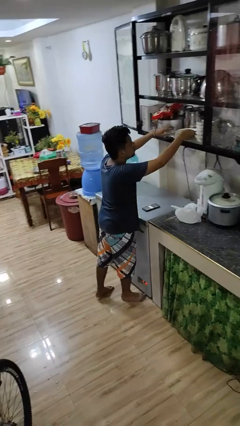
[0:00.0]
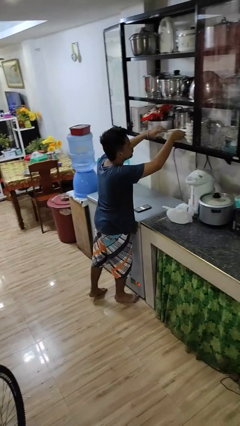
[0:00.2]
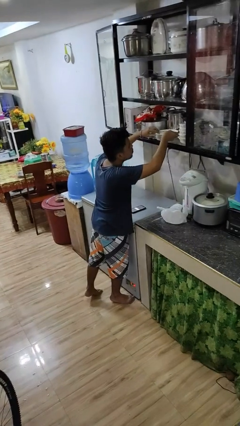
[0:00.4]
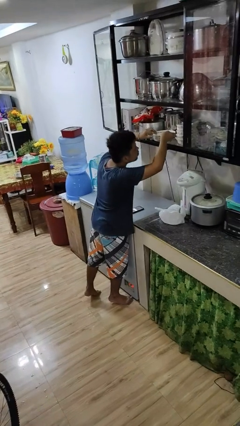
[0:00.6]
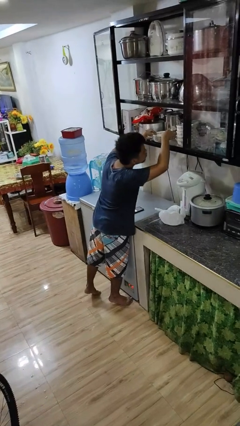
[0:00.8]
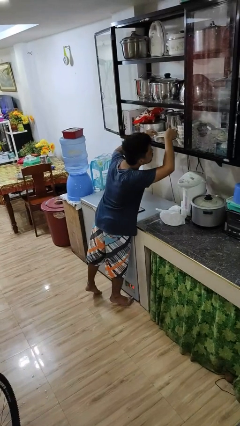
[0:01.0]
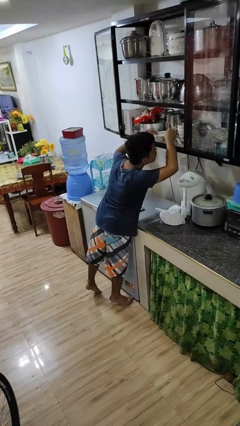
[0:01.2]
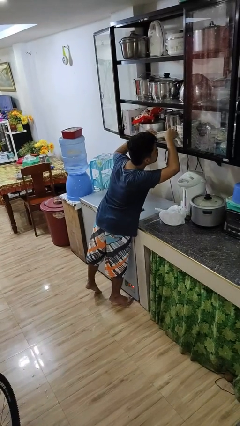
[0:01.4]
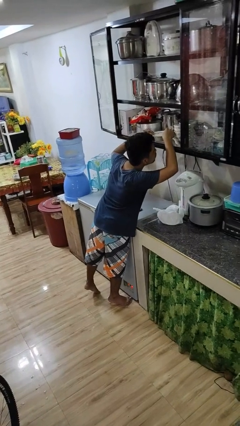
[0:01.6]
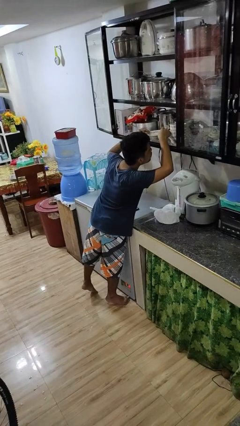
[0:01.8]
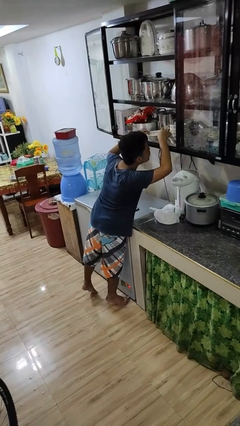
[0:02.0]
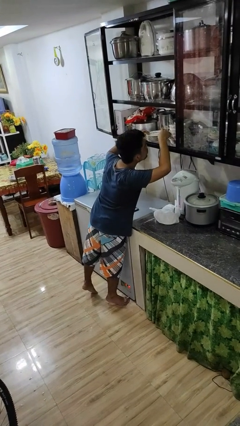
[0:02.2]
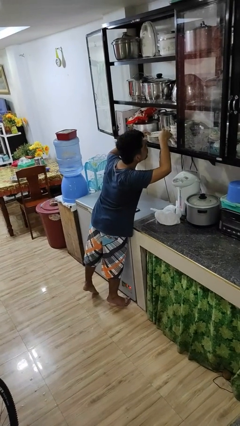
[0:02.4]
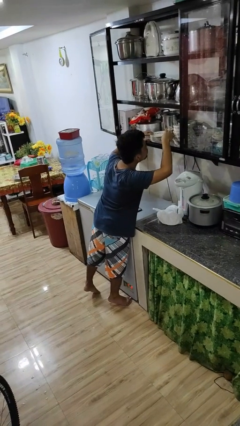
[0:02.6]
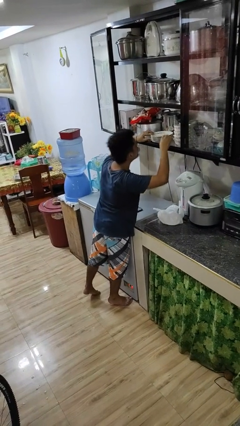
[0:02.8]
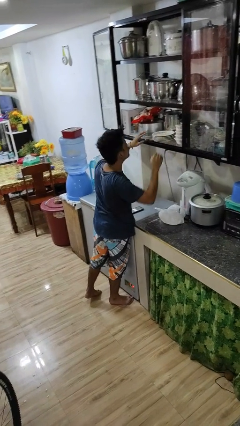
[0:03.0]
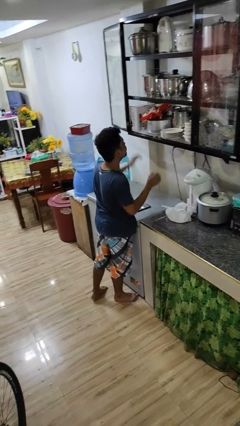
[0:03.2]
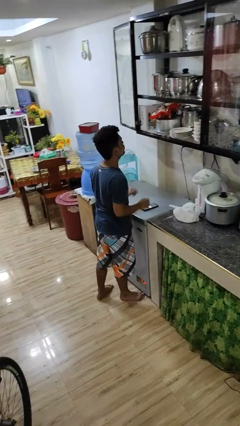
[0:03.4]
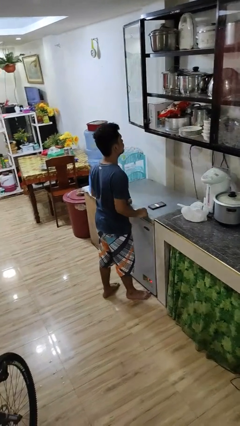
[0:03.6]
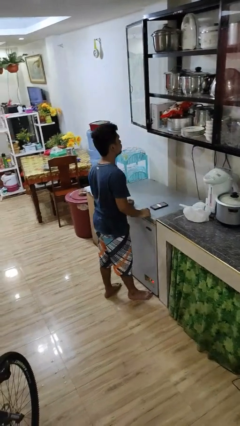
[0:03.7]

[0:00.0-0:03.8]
person searches in cabinet

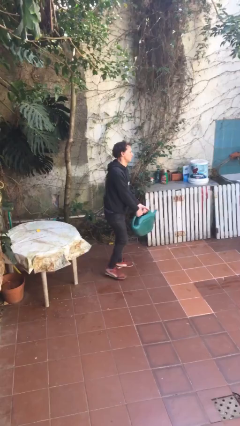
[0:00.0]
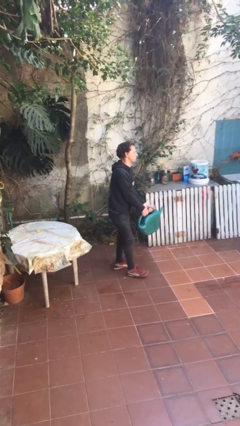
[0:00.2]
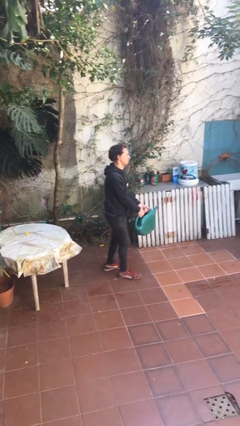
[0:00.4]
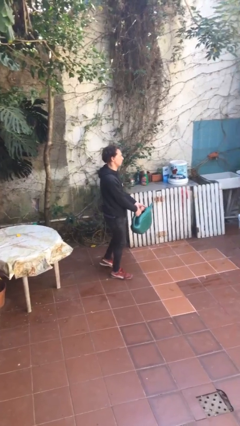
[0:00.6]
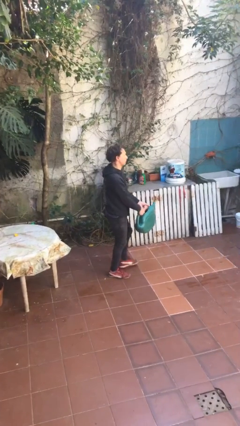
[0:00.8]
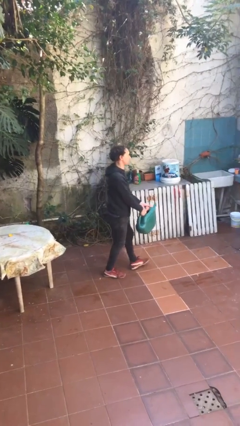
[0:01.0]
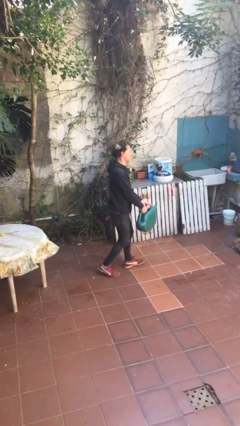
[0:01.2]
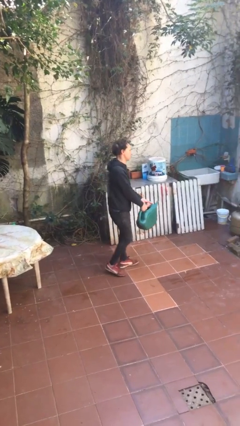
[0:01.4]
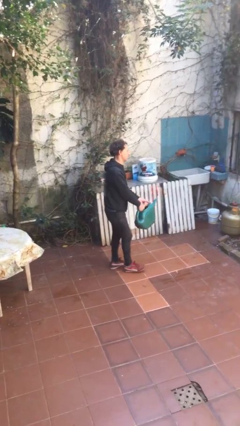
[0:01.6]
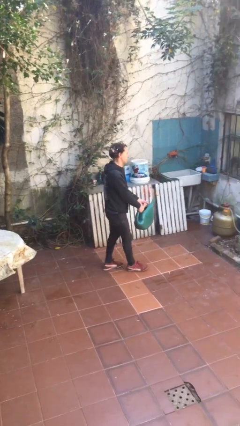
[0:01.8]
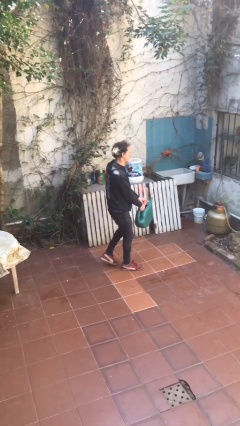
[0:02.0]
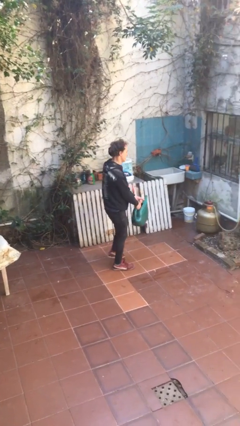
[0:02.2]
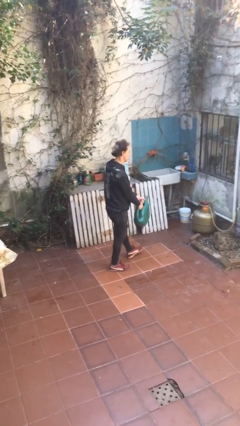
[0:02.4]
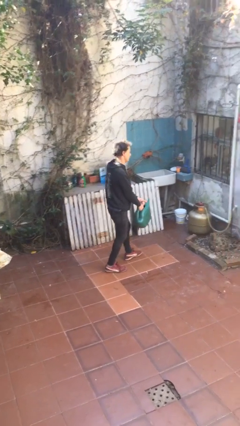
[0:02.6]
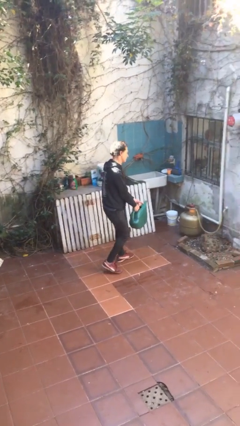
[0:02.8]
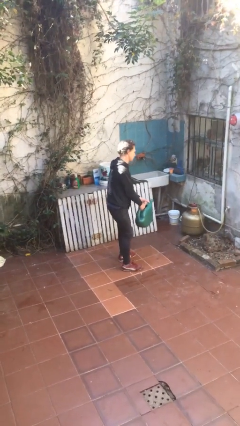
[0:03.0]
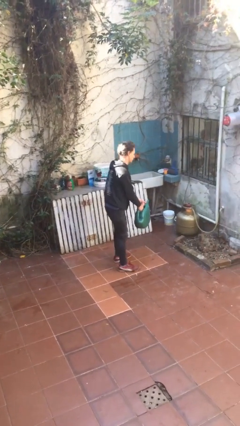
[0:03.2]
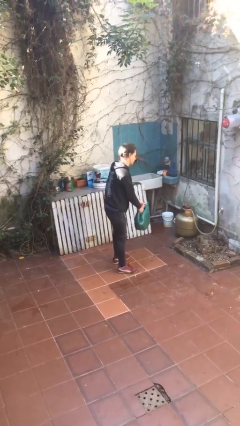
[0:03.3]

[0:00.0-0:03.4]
person carries heavy object

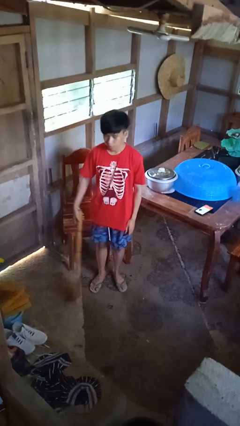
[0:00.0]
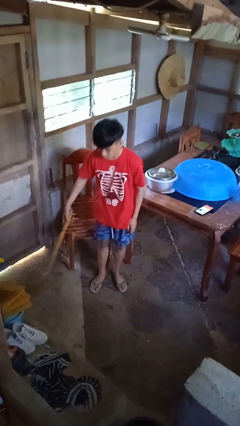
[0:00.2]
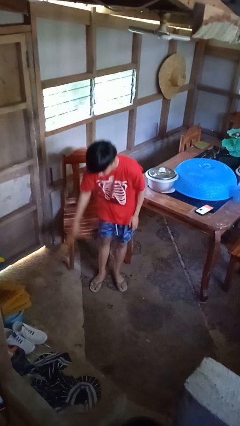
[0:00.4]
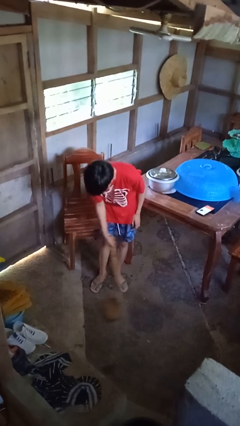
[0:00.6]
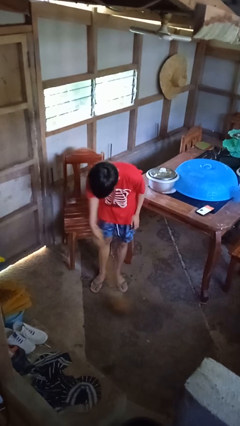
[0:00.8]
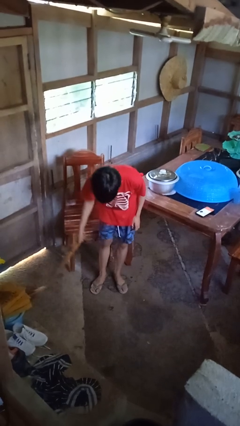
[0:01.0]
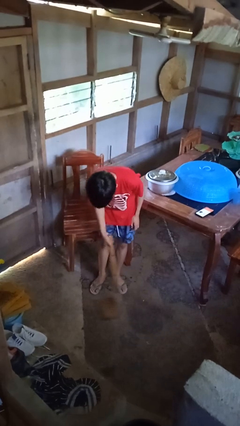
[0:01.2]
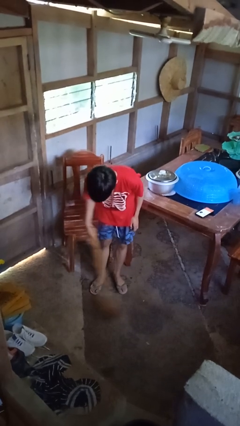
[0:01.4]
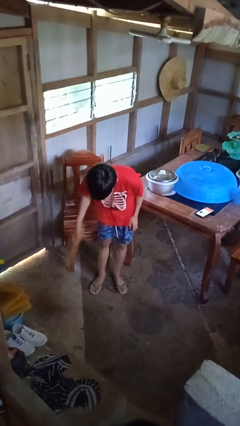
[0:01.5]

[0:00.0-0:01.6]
person sweeps floor

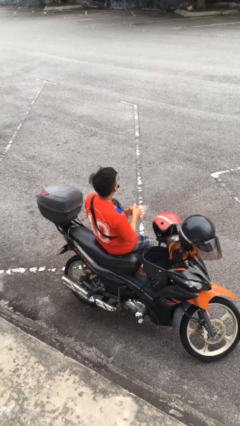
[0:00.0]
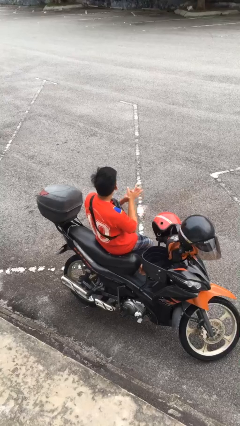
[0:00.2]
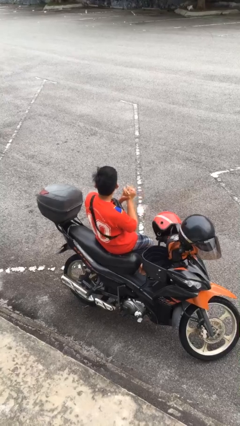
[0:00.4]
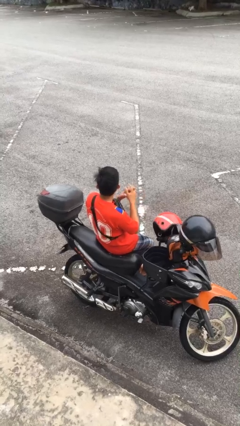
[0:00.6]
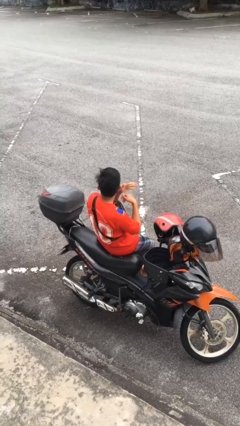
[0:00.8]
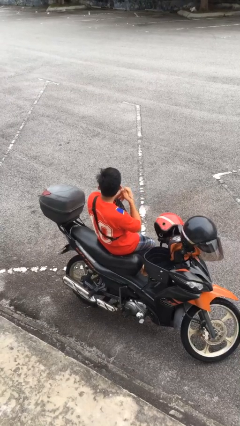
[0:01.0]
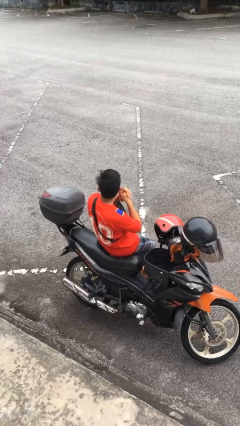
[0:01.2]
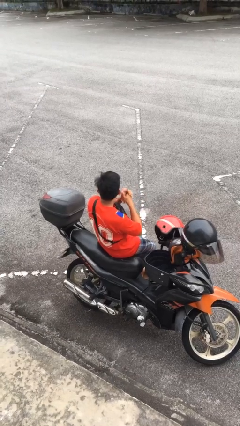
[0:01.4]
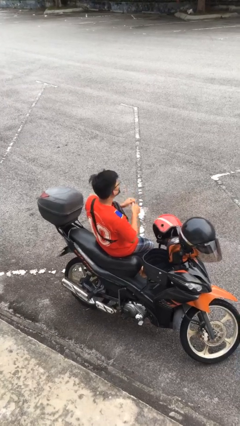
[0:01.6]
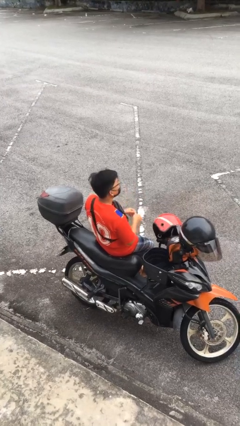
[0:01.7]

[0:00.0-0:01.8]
person cracks knuckles

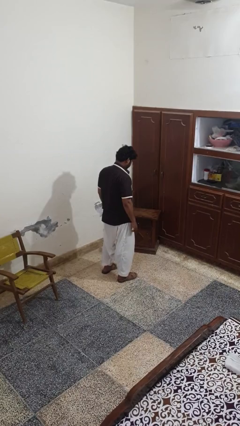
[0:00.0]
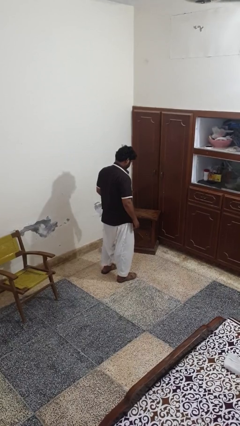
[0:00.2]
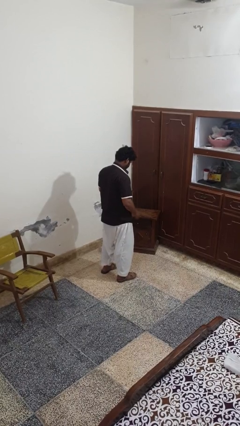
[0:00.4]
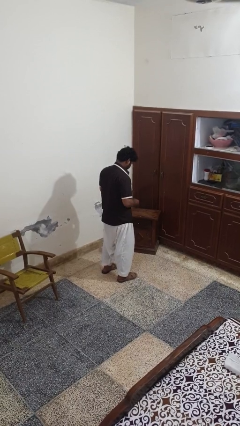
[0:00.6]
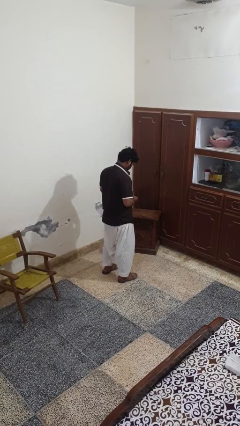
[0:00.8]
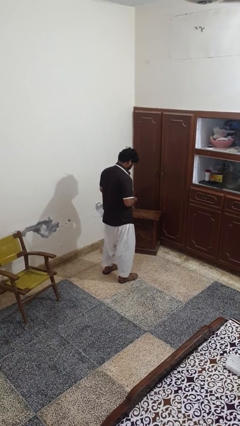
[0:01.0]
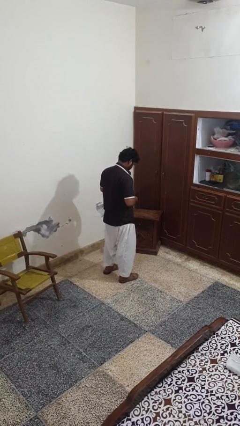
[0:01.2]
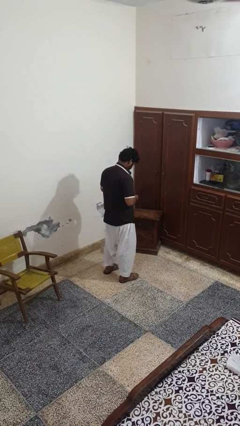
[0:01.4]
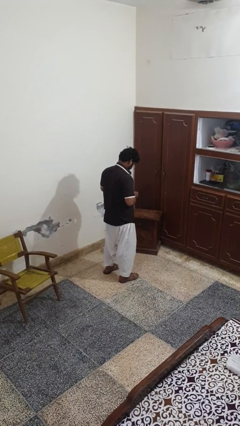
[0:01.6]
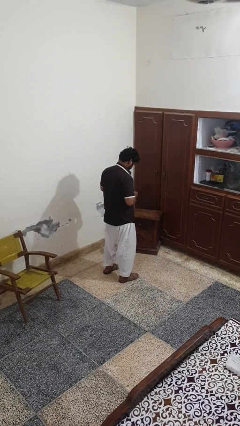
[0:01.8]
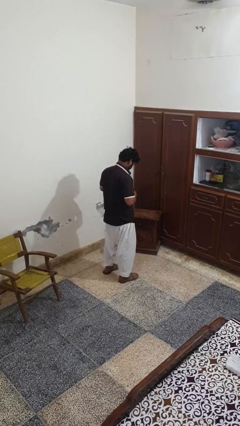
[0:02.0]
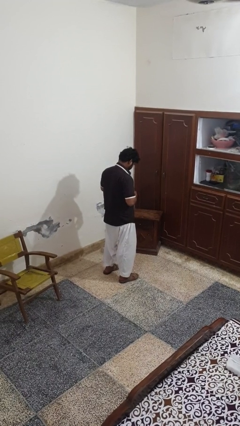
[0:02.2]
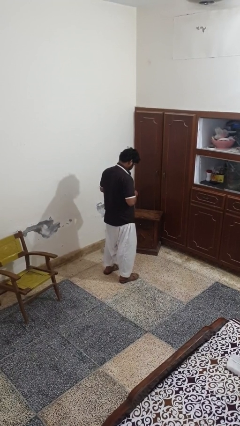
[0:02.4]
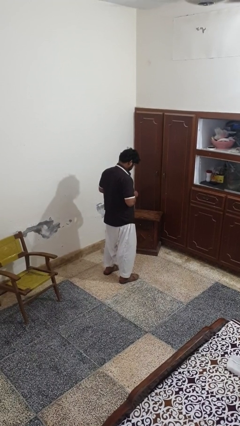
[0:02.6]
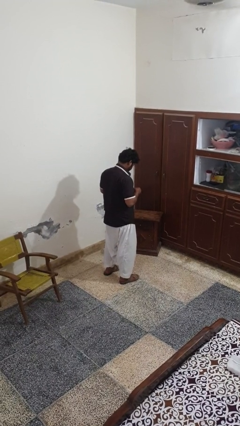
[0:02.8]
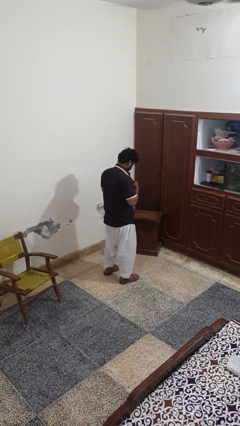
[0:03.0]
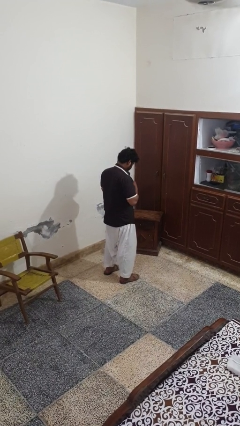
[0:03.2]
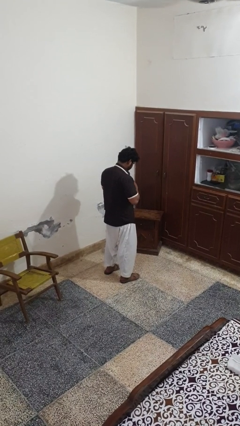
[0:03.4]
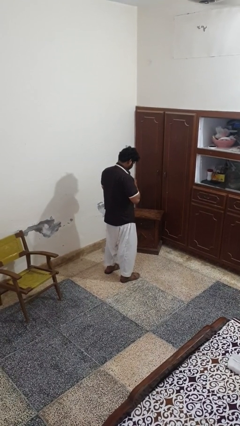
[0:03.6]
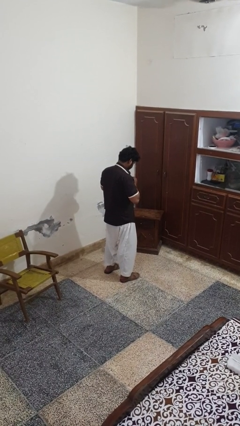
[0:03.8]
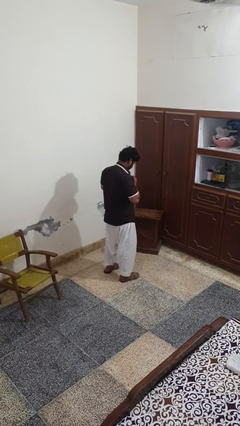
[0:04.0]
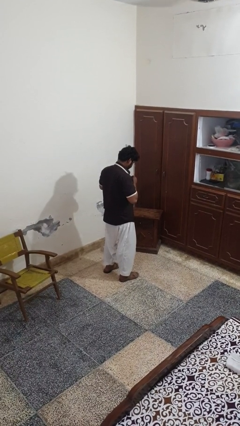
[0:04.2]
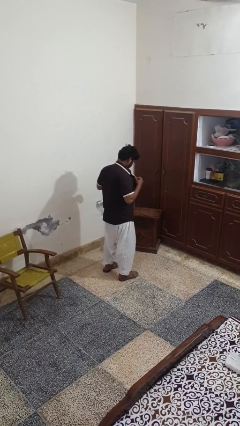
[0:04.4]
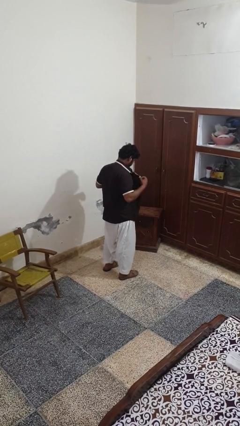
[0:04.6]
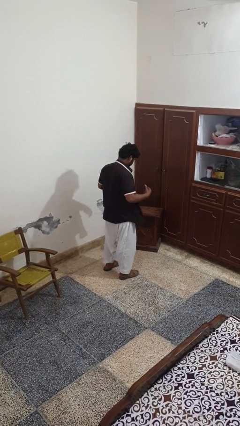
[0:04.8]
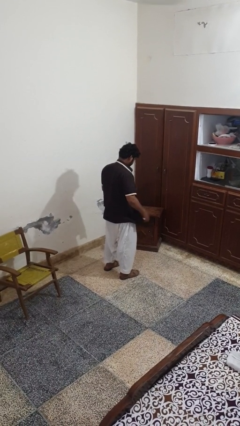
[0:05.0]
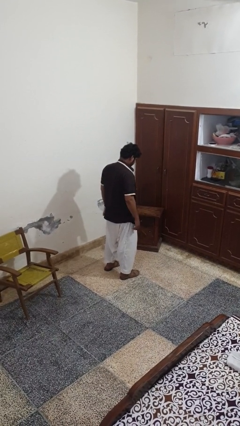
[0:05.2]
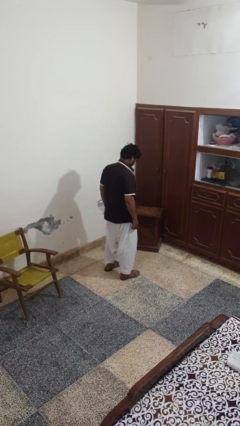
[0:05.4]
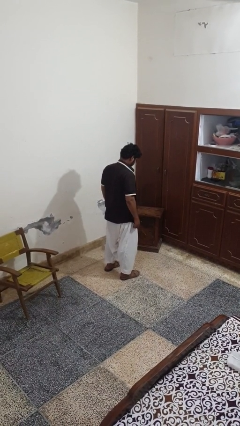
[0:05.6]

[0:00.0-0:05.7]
person unbuttons shirt

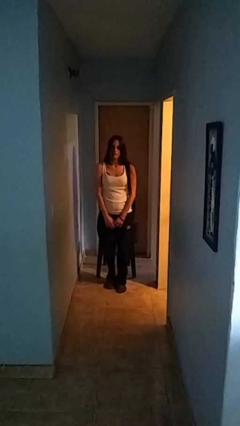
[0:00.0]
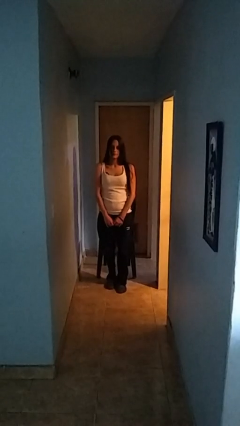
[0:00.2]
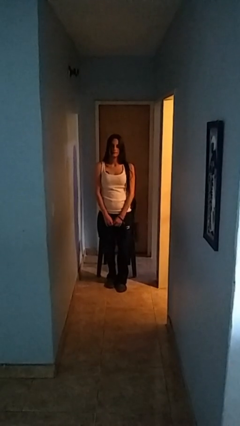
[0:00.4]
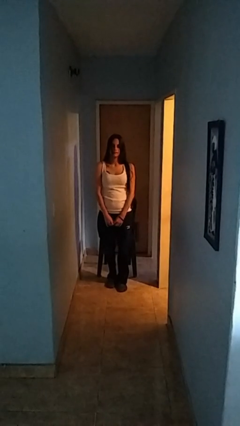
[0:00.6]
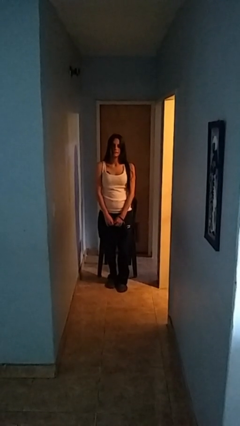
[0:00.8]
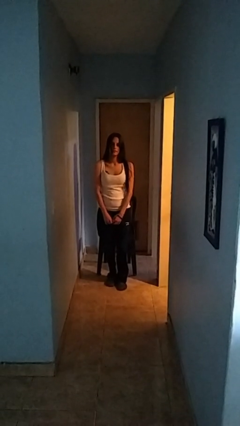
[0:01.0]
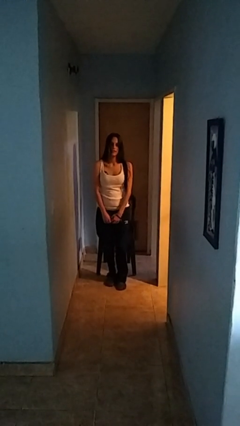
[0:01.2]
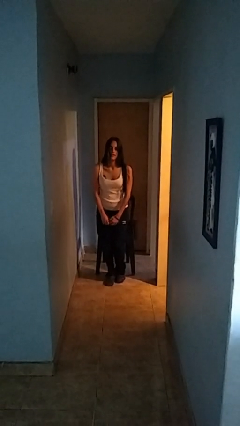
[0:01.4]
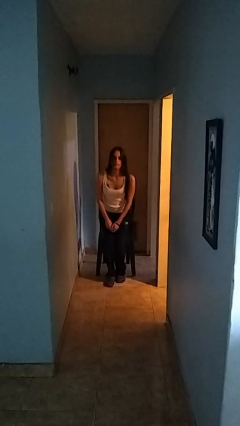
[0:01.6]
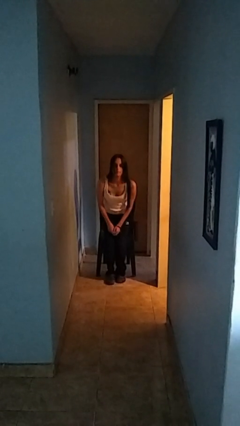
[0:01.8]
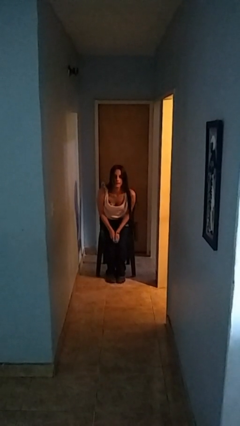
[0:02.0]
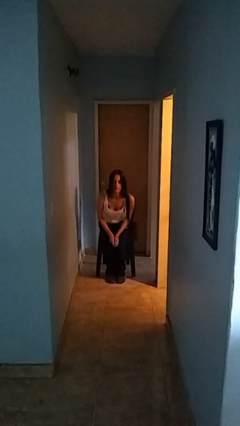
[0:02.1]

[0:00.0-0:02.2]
person stands up from floor
